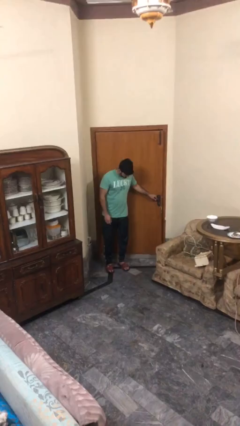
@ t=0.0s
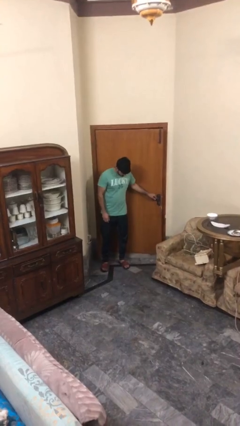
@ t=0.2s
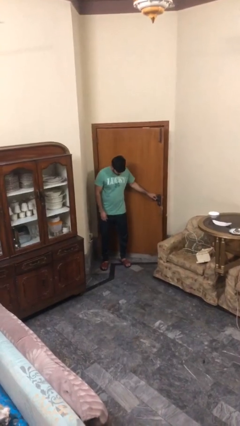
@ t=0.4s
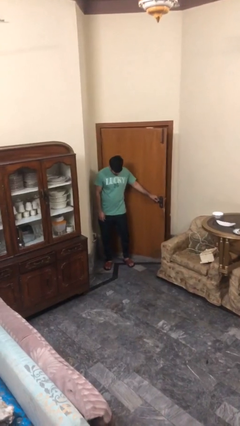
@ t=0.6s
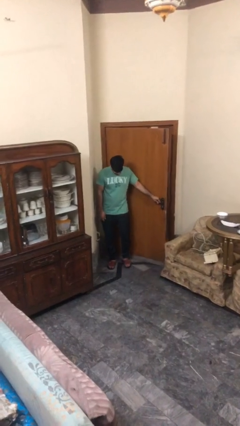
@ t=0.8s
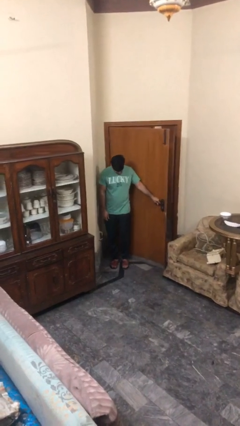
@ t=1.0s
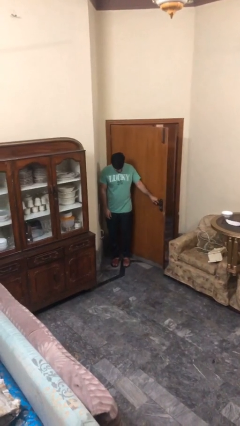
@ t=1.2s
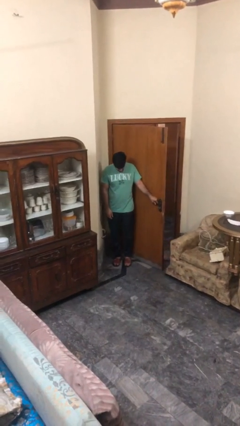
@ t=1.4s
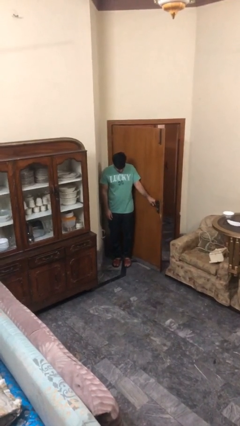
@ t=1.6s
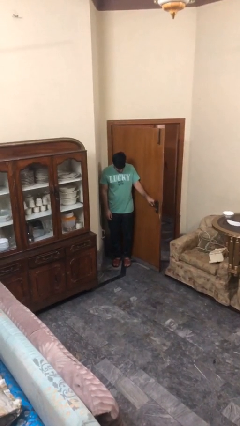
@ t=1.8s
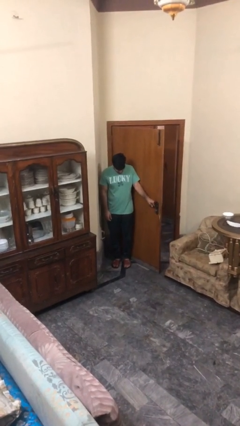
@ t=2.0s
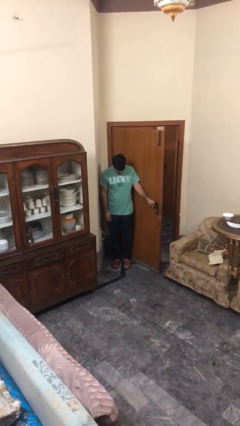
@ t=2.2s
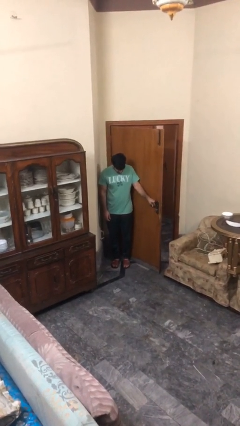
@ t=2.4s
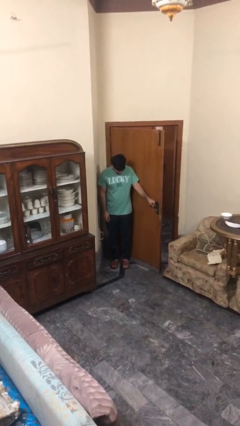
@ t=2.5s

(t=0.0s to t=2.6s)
person opens facility door

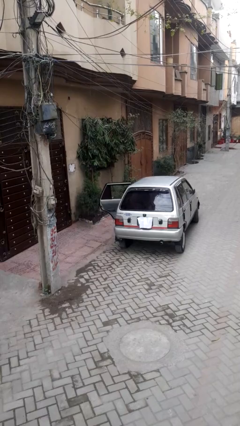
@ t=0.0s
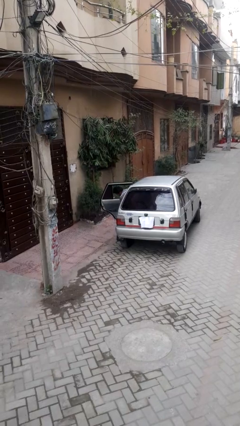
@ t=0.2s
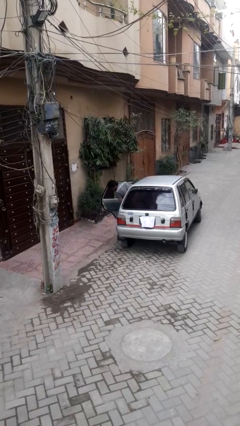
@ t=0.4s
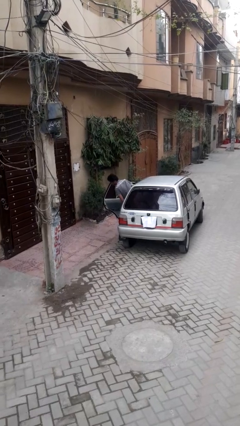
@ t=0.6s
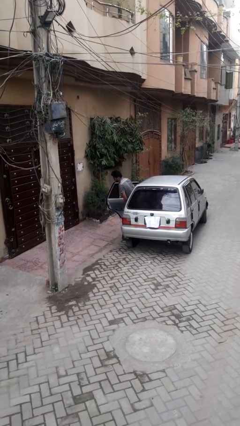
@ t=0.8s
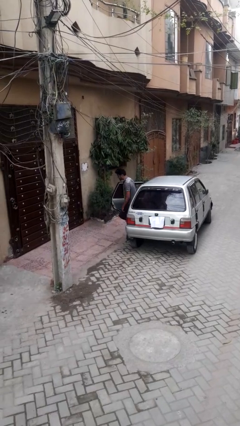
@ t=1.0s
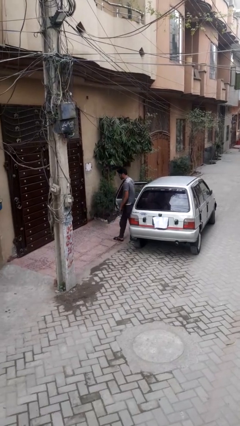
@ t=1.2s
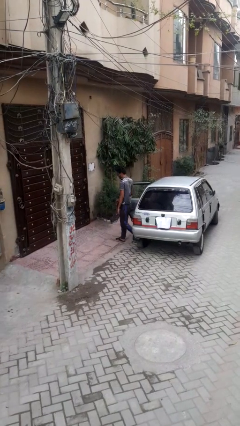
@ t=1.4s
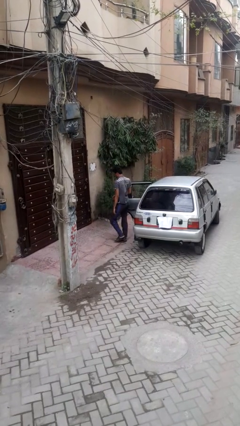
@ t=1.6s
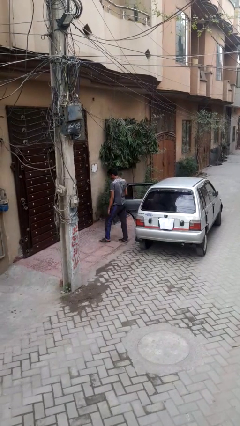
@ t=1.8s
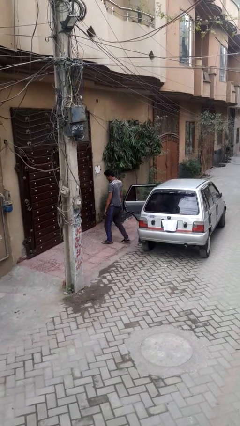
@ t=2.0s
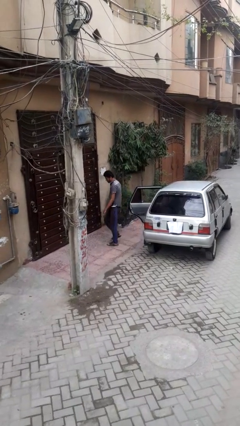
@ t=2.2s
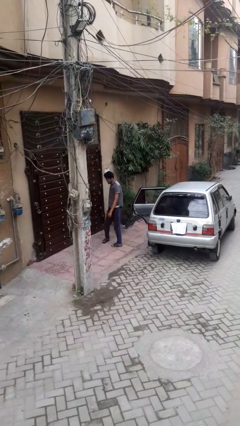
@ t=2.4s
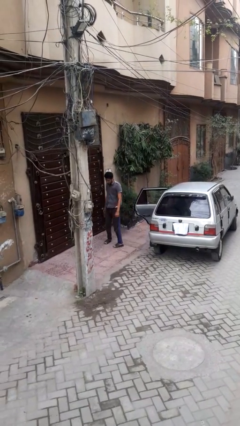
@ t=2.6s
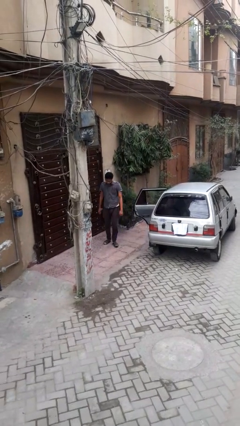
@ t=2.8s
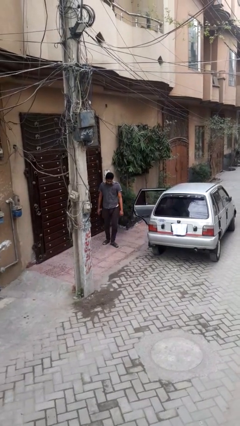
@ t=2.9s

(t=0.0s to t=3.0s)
person exits car

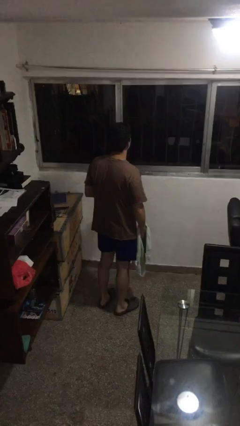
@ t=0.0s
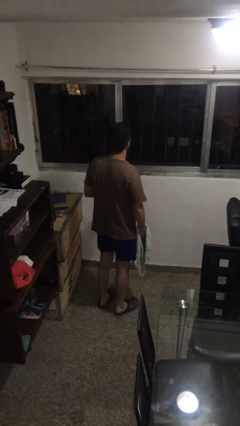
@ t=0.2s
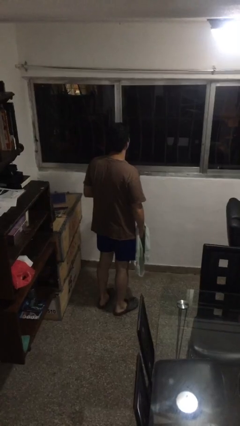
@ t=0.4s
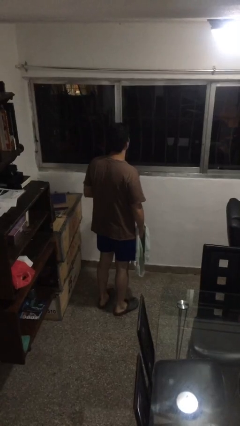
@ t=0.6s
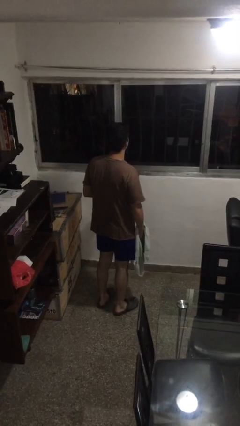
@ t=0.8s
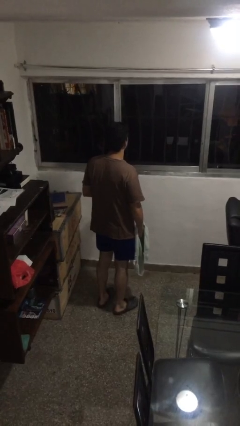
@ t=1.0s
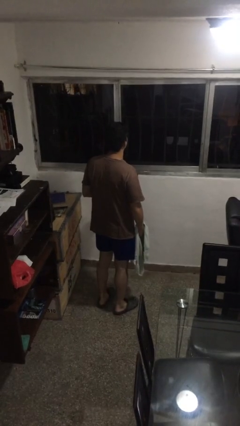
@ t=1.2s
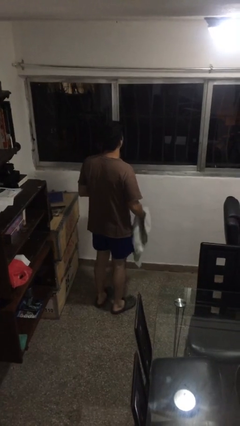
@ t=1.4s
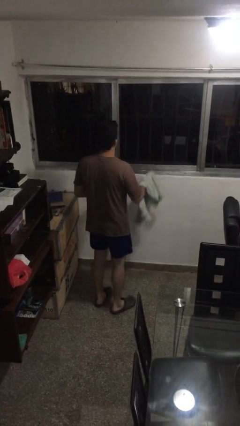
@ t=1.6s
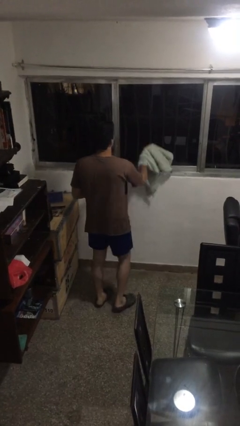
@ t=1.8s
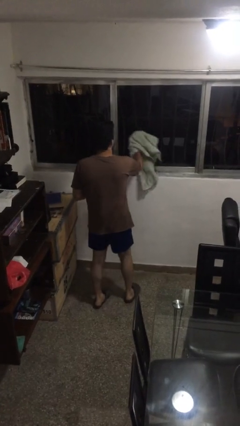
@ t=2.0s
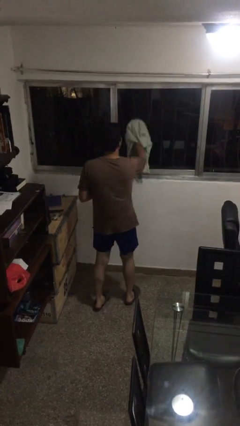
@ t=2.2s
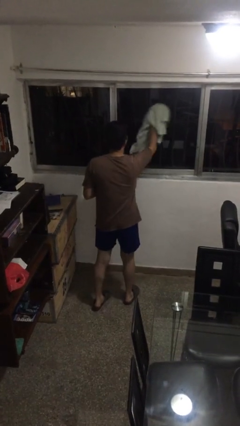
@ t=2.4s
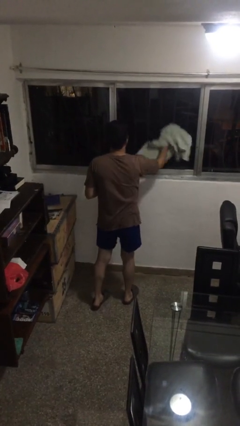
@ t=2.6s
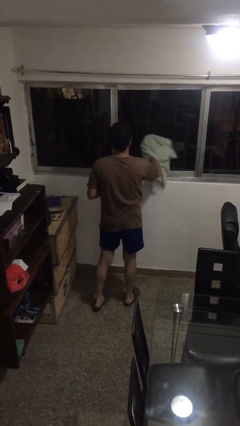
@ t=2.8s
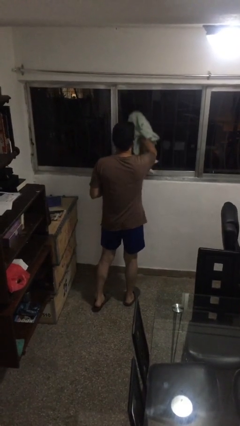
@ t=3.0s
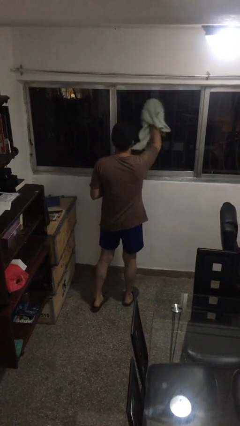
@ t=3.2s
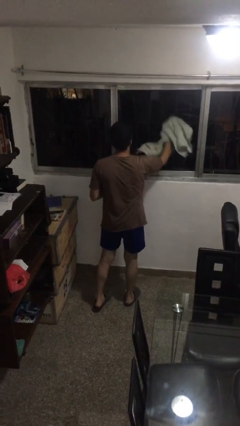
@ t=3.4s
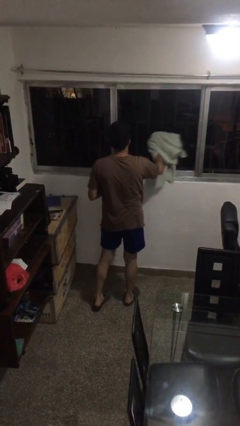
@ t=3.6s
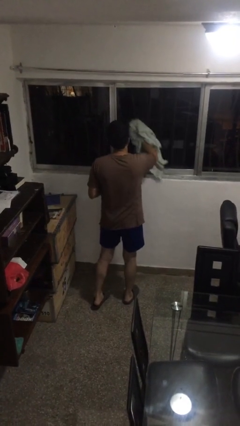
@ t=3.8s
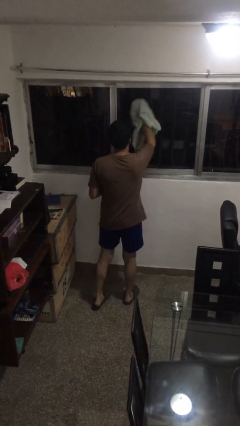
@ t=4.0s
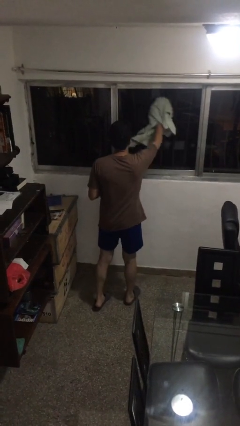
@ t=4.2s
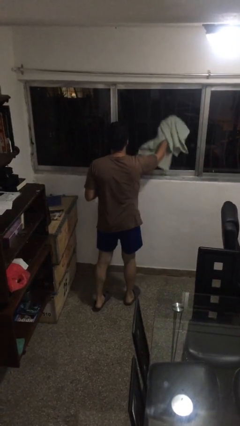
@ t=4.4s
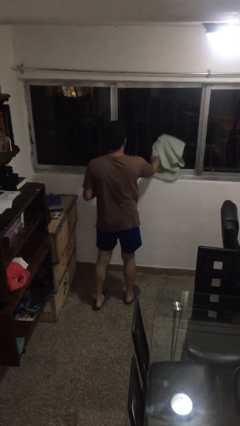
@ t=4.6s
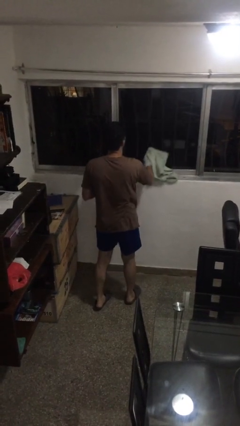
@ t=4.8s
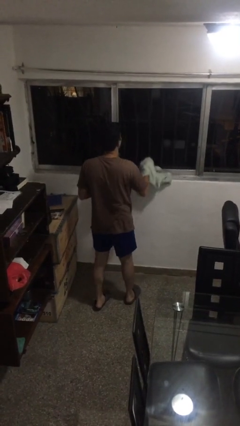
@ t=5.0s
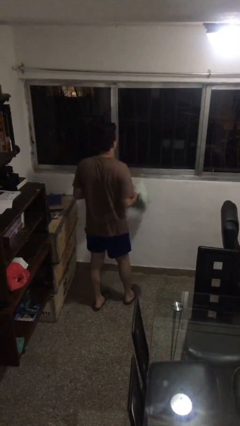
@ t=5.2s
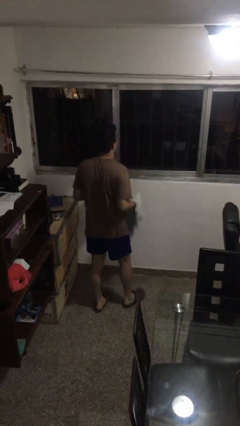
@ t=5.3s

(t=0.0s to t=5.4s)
person washes window

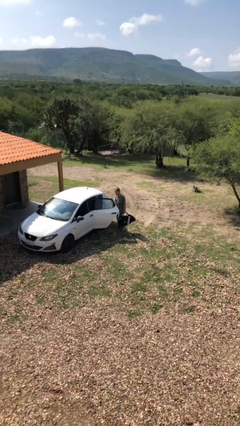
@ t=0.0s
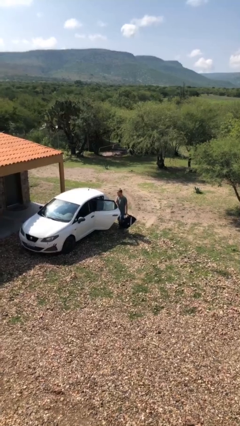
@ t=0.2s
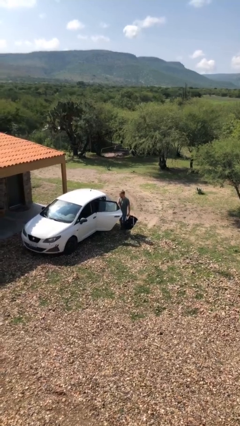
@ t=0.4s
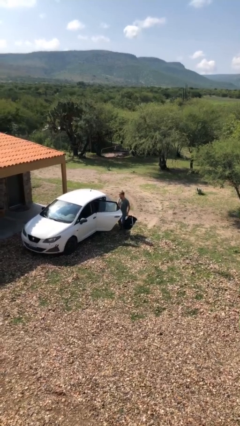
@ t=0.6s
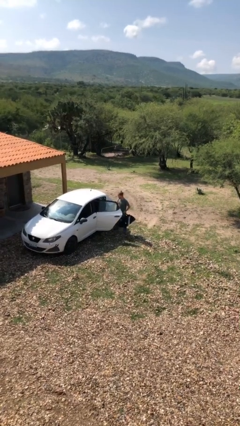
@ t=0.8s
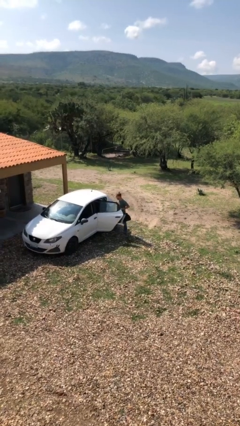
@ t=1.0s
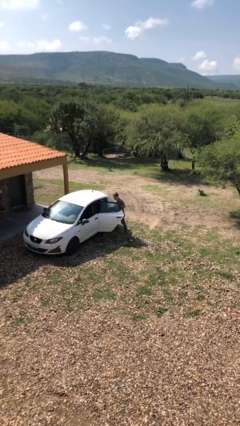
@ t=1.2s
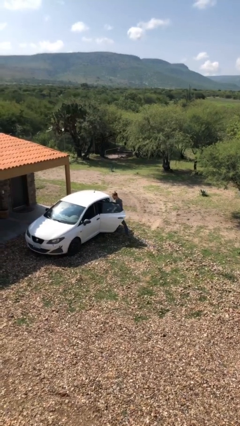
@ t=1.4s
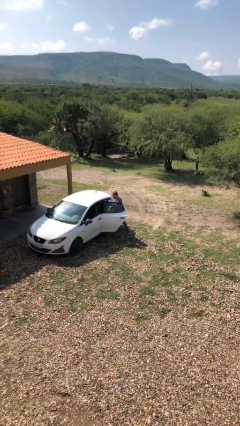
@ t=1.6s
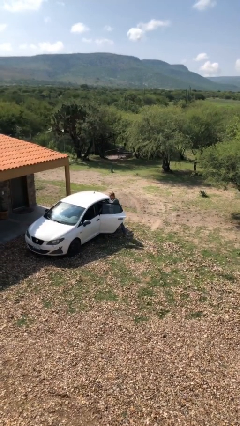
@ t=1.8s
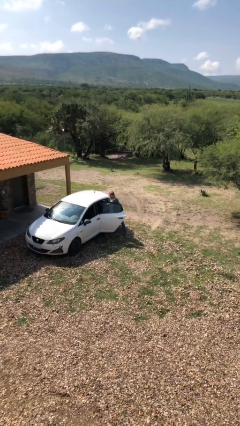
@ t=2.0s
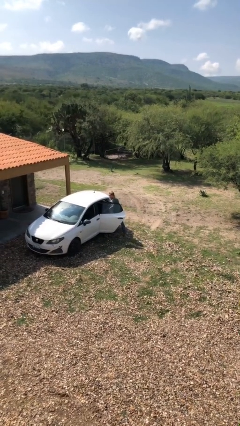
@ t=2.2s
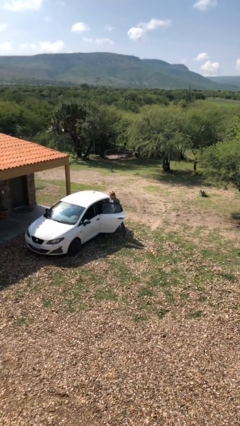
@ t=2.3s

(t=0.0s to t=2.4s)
person loads car

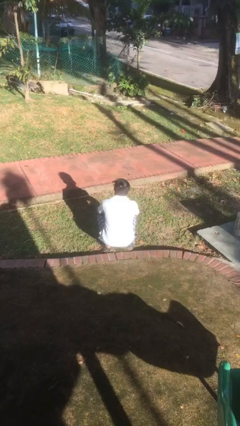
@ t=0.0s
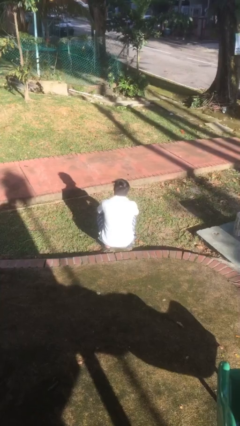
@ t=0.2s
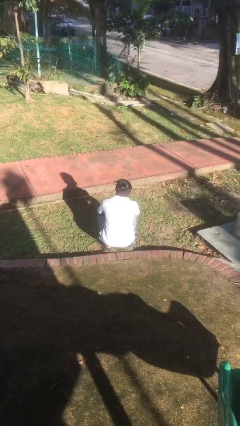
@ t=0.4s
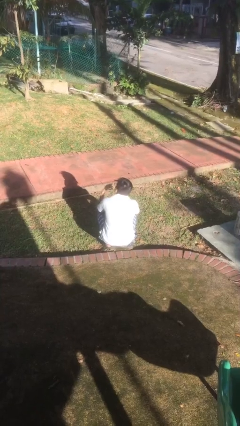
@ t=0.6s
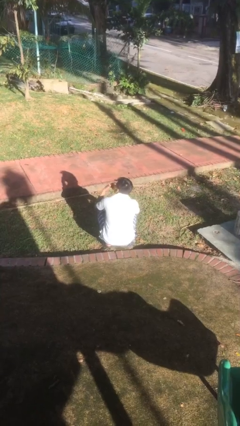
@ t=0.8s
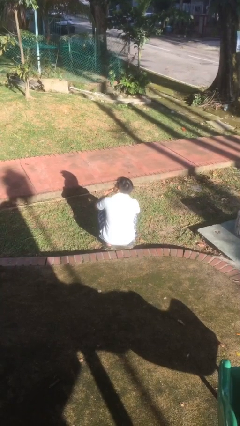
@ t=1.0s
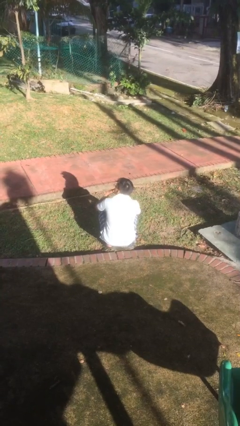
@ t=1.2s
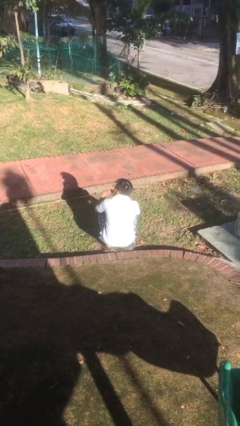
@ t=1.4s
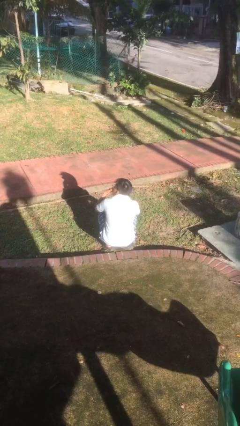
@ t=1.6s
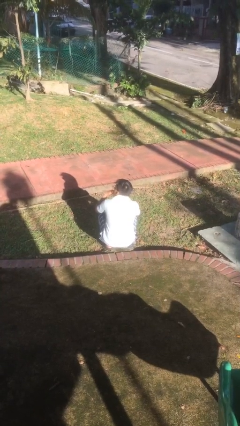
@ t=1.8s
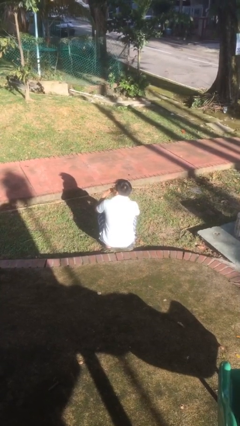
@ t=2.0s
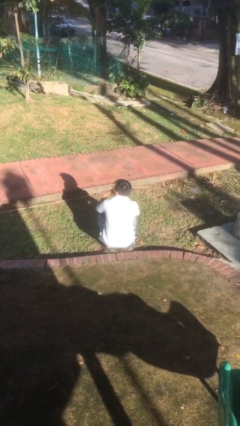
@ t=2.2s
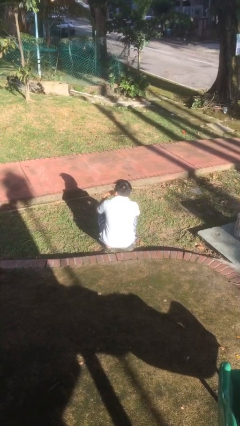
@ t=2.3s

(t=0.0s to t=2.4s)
person strokes chin

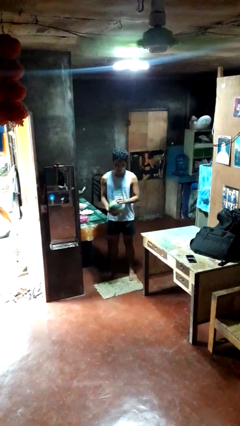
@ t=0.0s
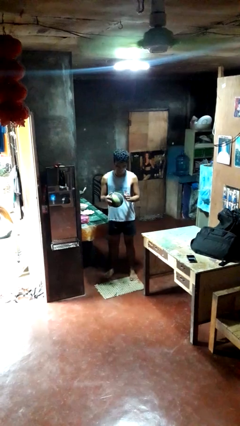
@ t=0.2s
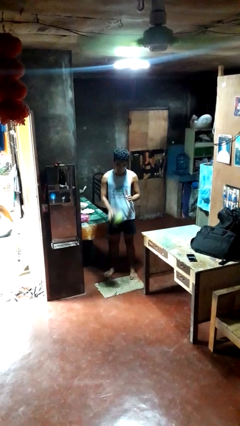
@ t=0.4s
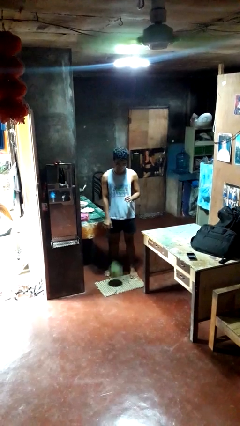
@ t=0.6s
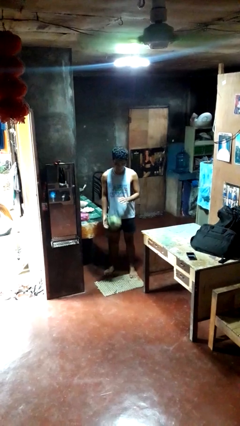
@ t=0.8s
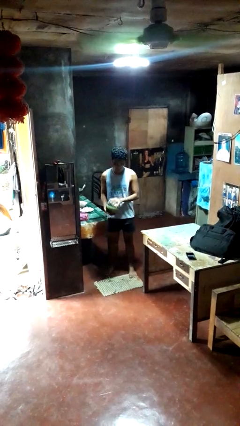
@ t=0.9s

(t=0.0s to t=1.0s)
person bounces ball on floor

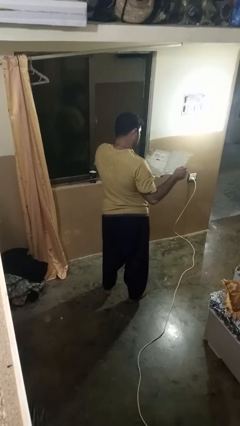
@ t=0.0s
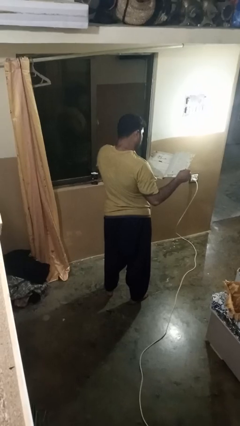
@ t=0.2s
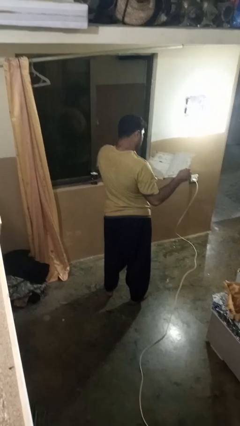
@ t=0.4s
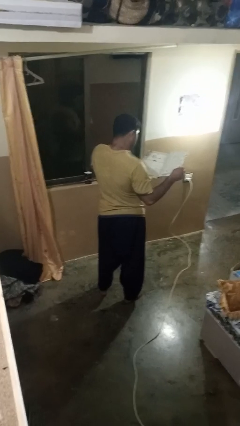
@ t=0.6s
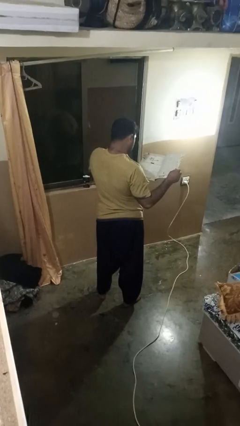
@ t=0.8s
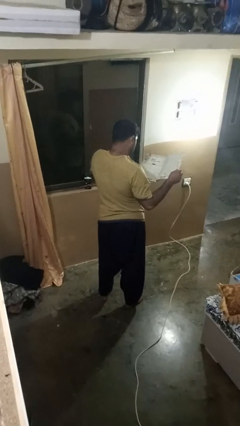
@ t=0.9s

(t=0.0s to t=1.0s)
person reads magazine
